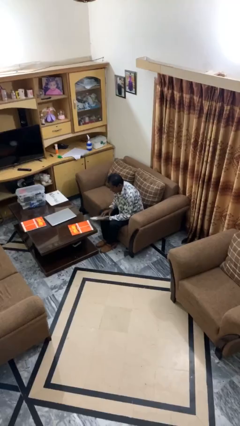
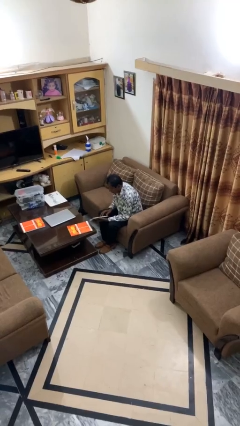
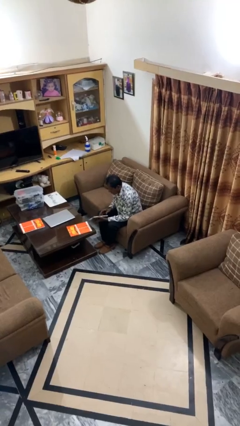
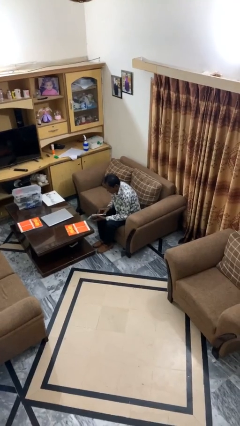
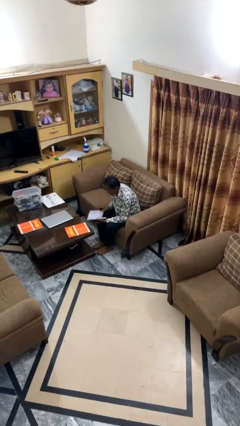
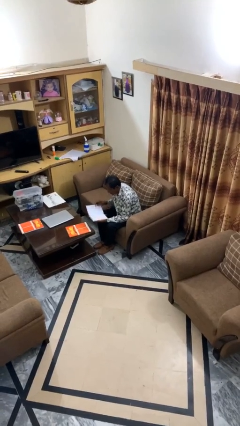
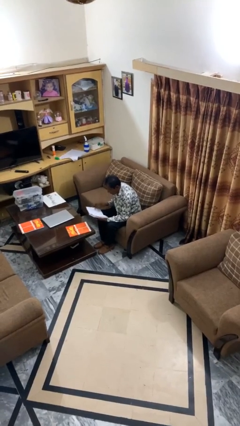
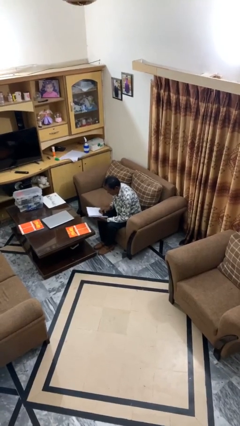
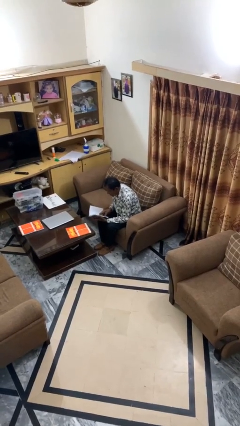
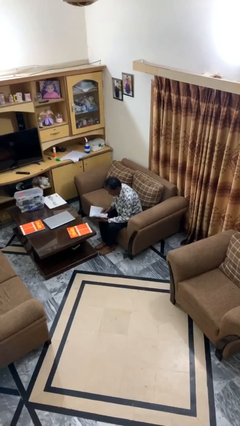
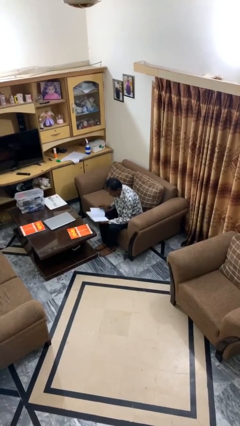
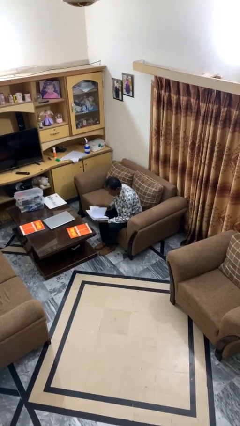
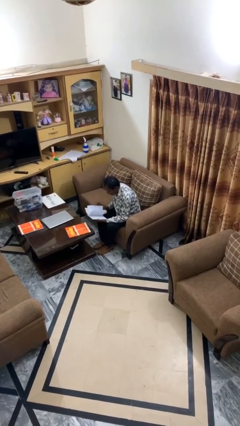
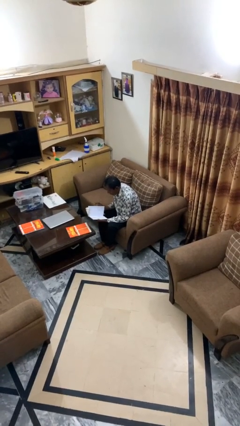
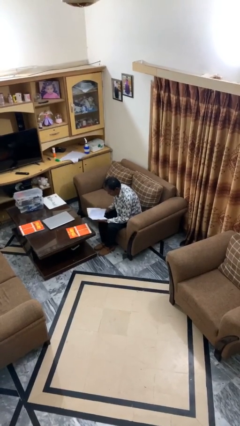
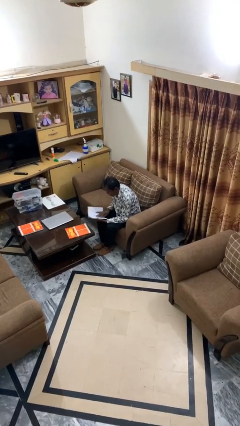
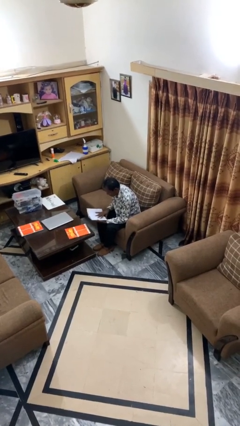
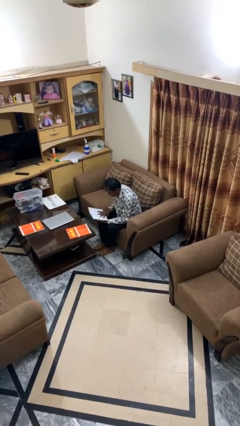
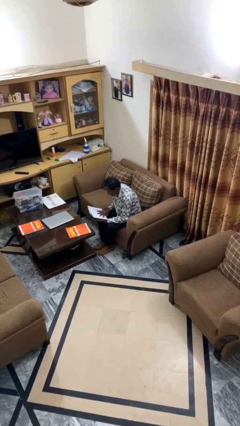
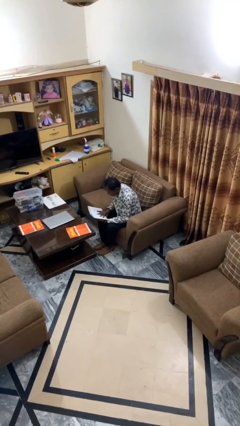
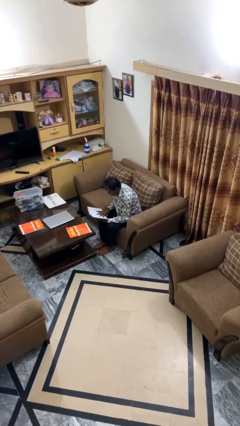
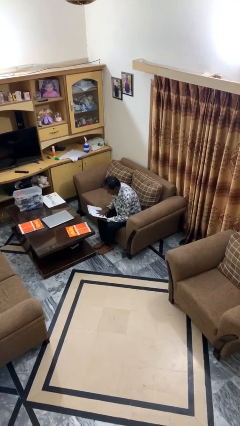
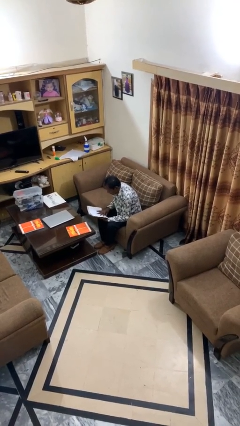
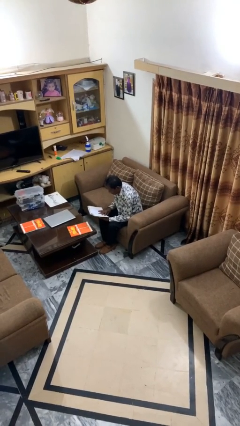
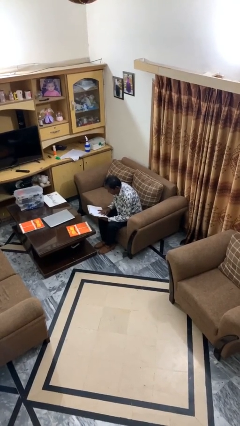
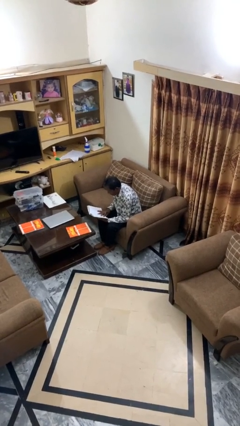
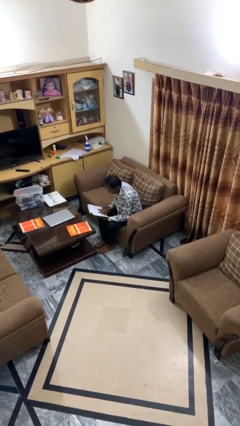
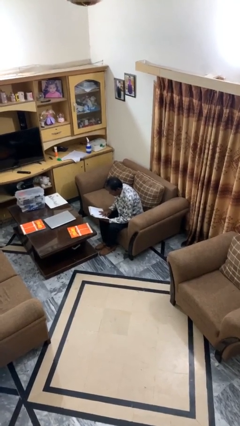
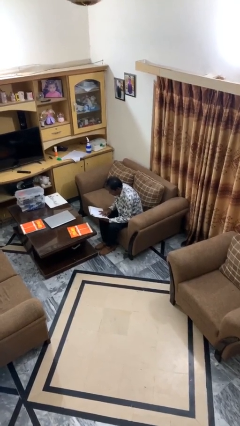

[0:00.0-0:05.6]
person reads document

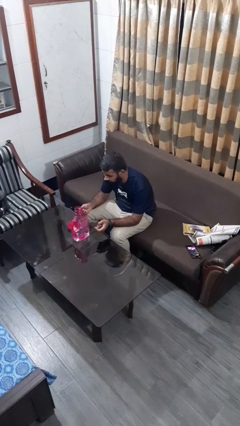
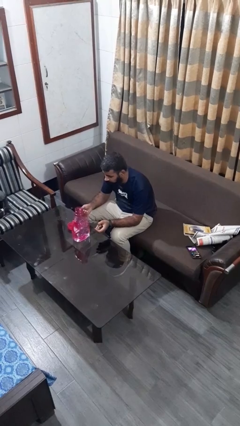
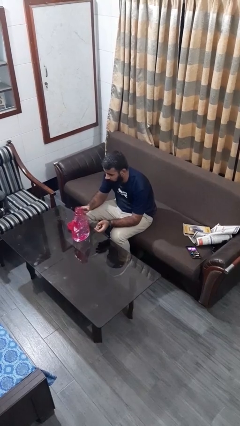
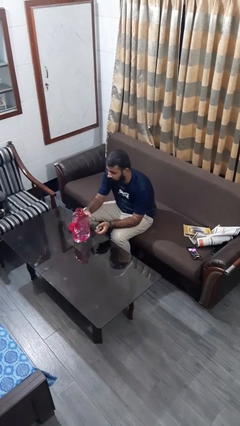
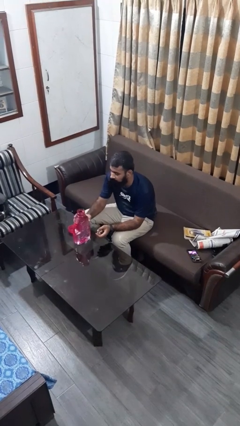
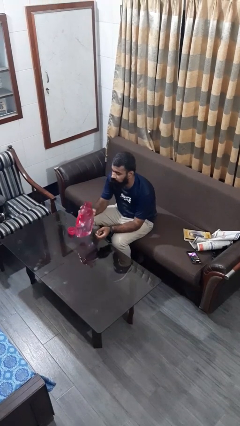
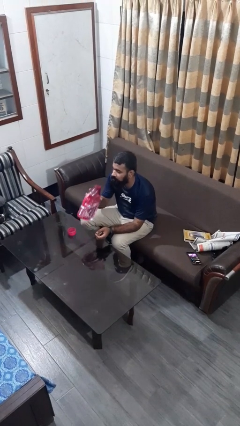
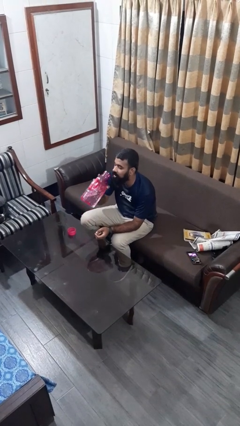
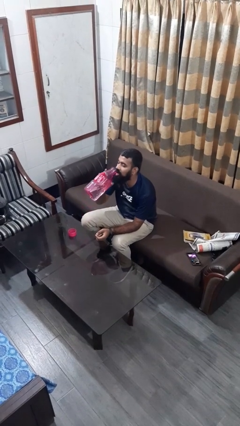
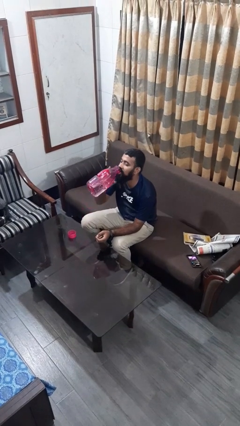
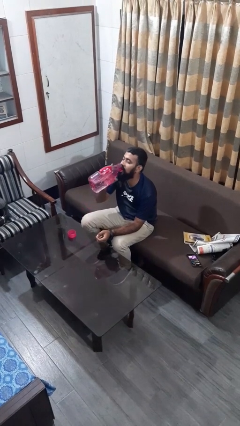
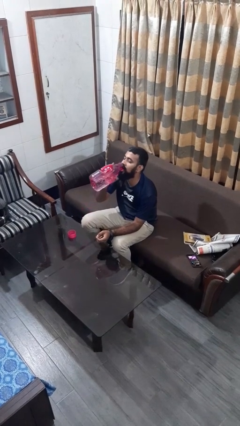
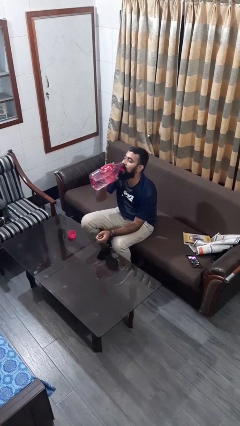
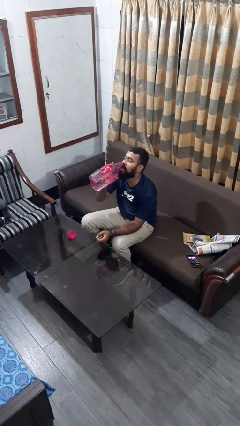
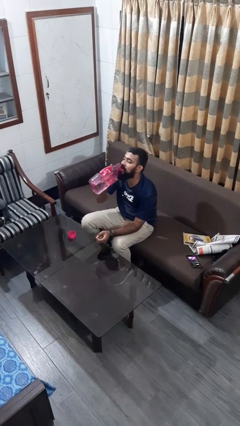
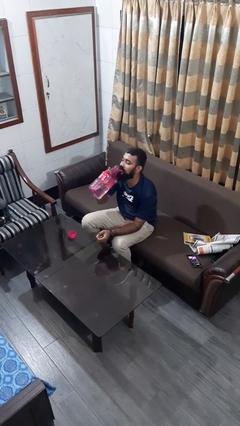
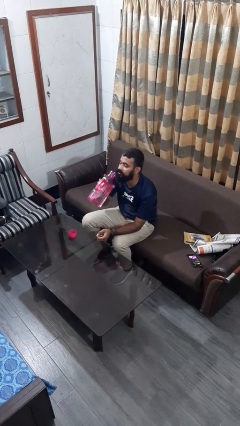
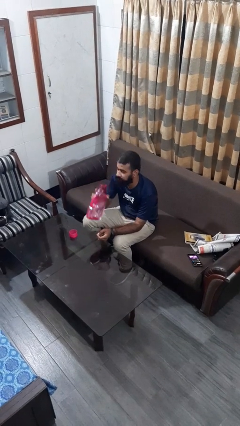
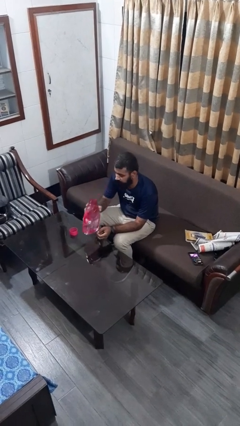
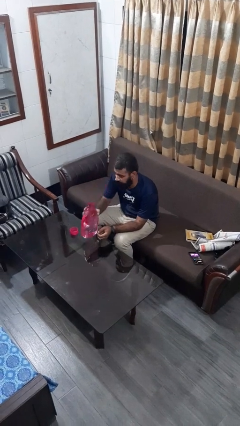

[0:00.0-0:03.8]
person drinks from bottle

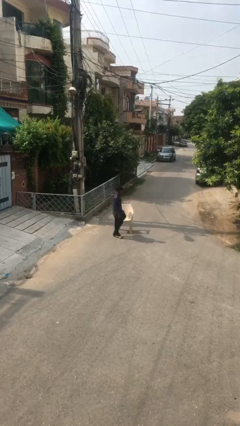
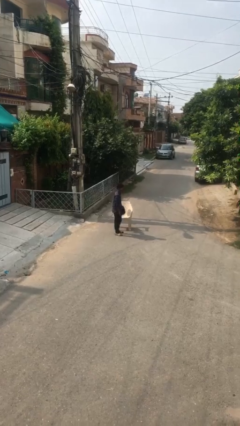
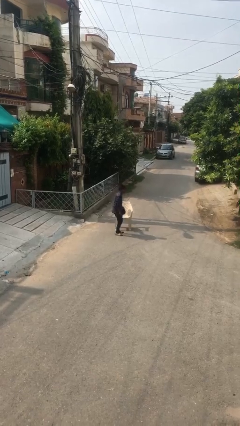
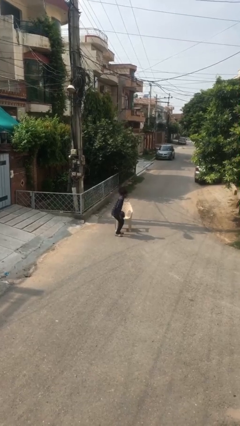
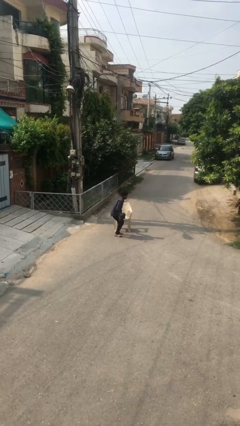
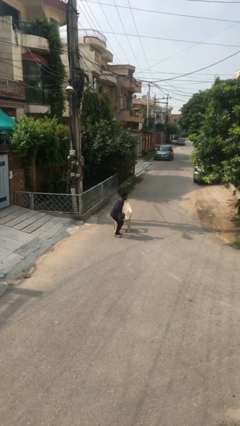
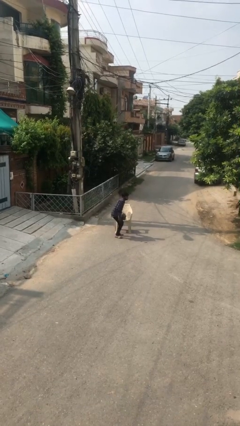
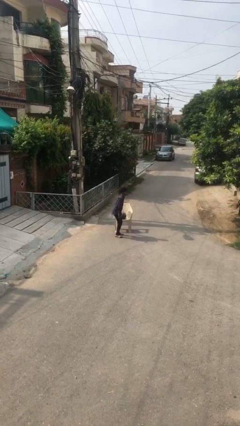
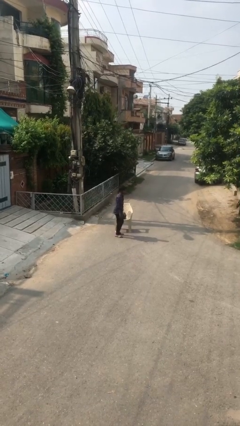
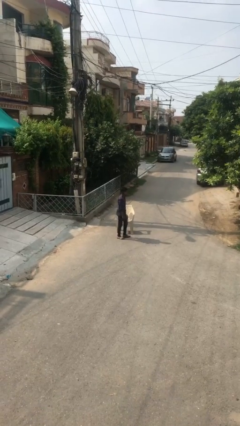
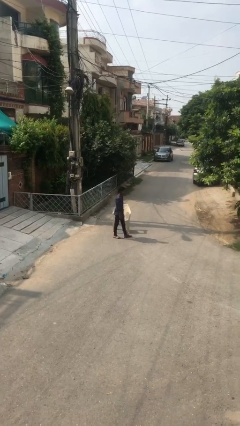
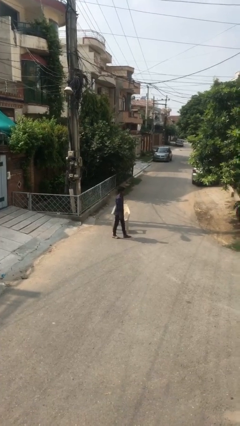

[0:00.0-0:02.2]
person puts down object on table

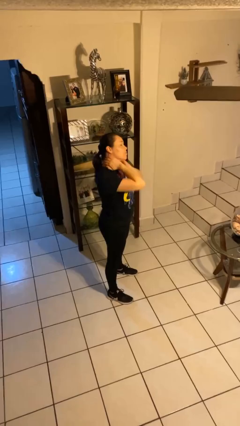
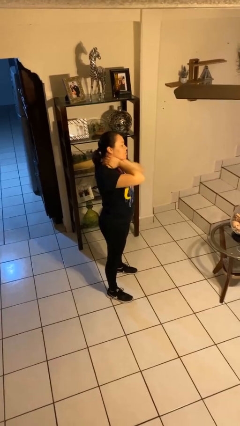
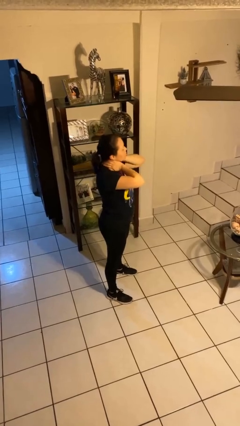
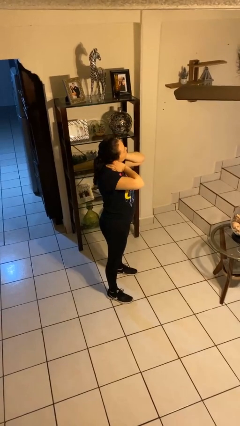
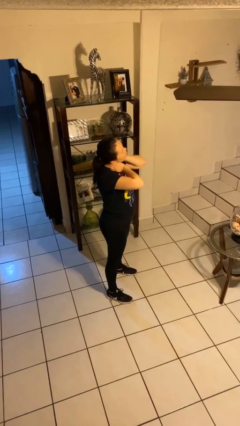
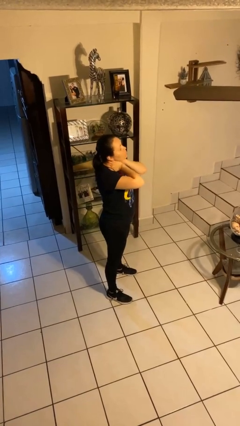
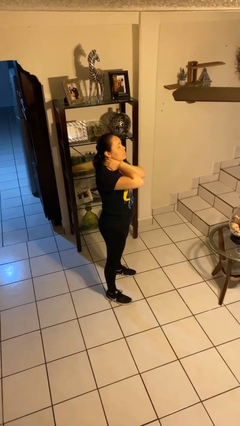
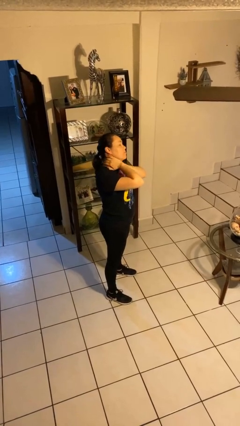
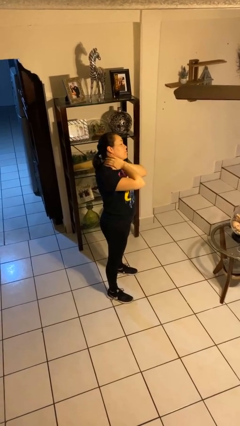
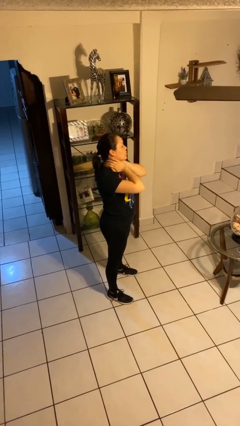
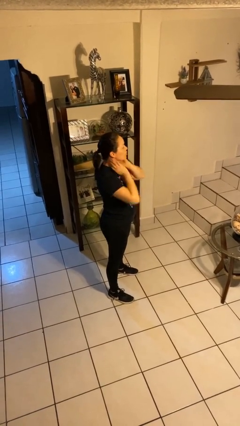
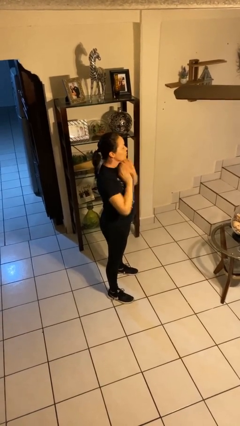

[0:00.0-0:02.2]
person rubs neck

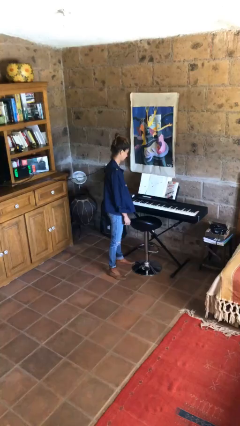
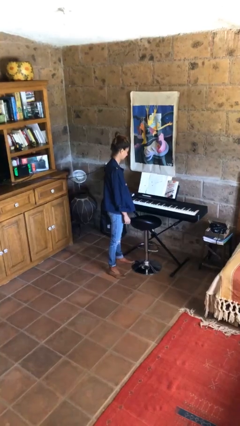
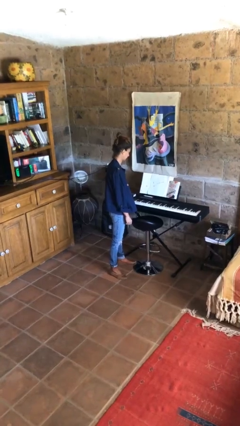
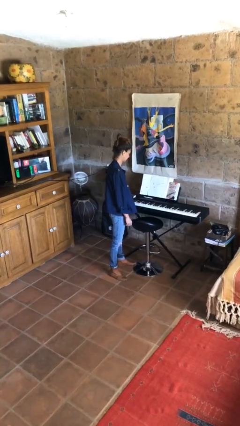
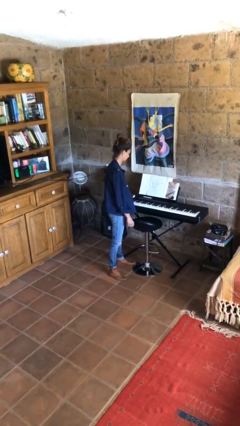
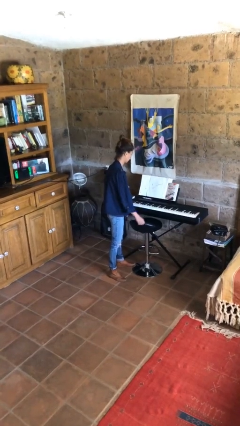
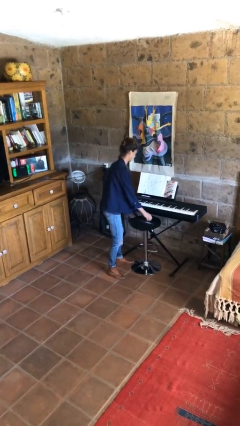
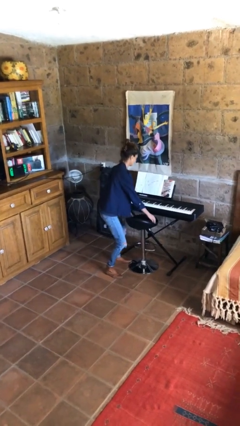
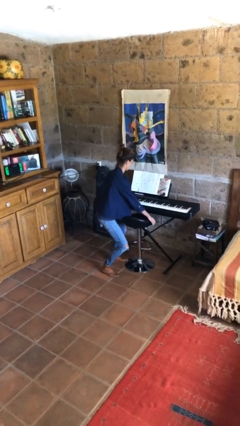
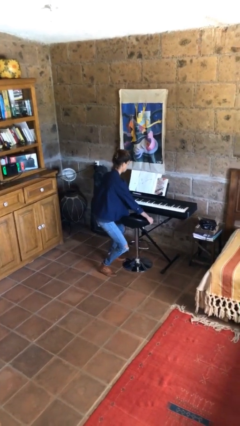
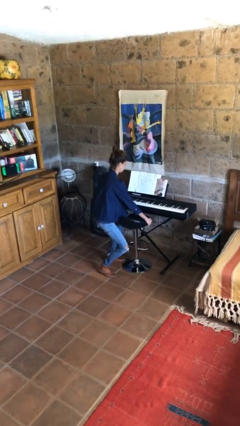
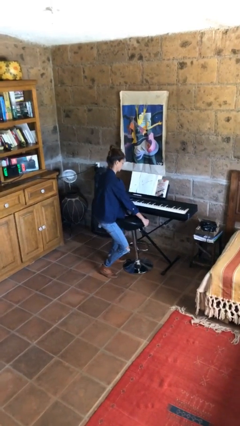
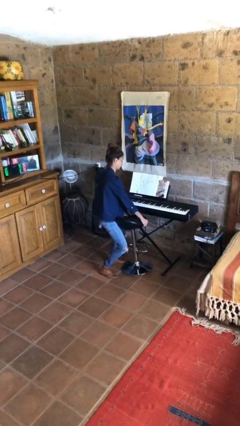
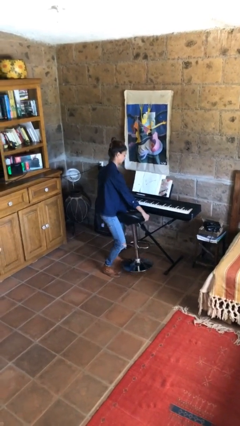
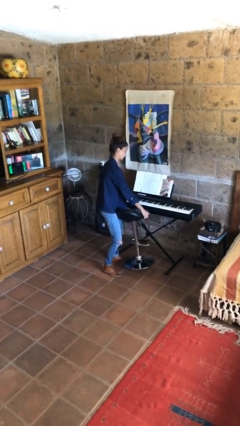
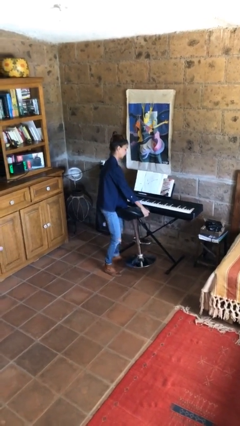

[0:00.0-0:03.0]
person picks up object from floor

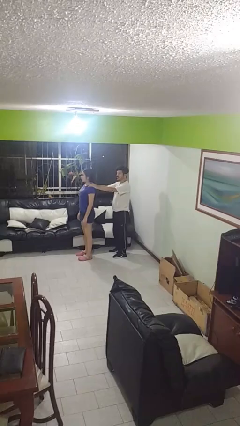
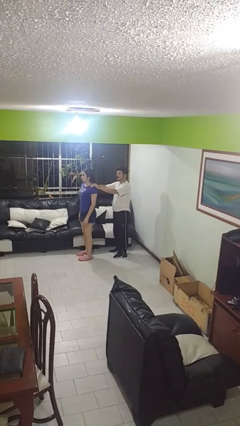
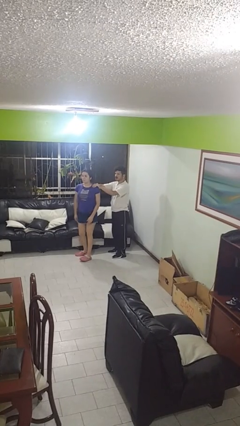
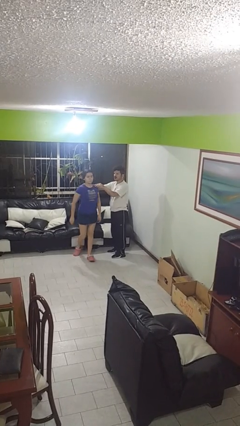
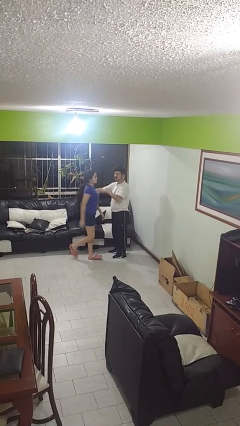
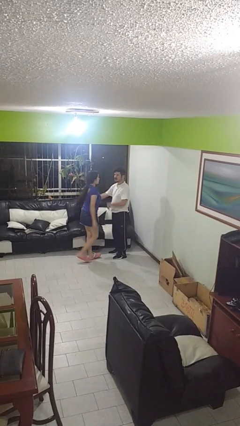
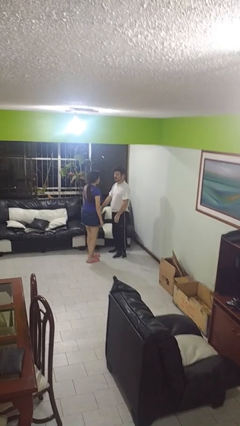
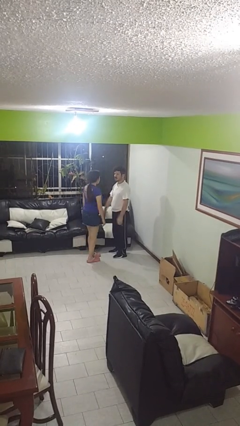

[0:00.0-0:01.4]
person spins person around
